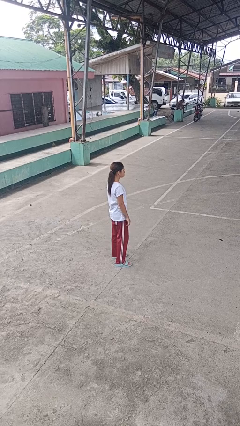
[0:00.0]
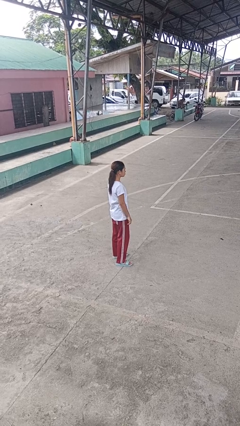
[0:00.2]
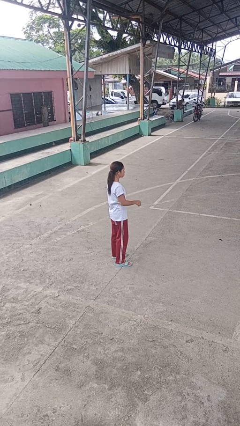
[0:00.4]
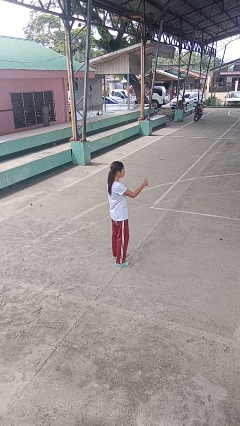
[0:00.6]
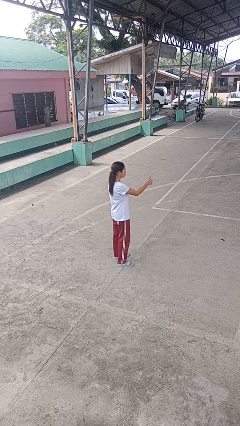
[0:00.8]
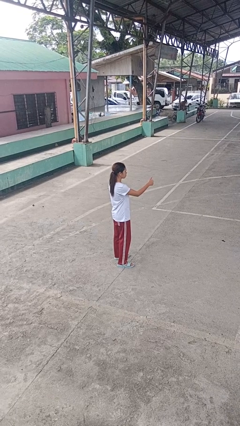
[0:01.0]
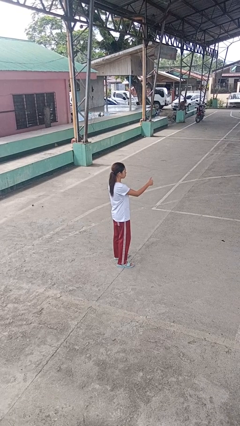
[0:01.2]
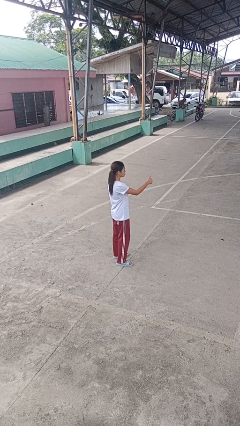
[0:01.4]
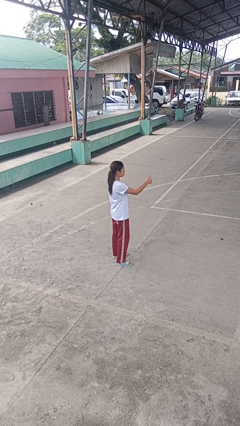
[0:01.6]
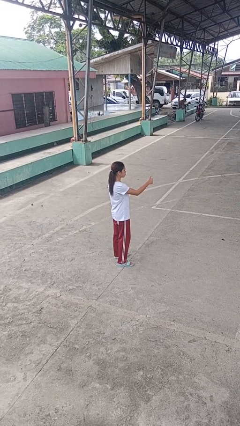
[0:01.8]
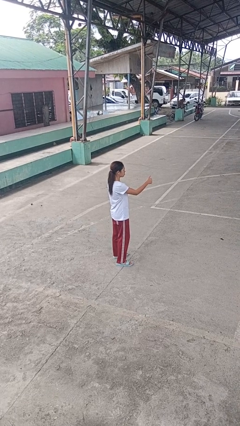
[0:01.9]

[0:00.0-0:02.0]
person gestures thumbs up

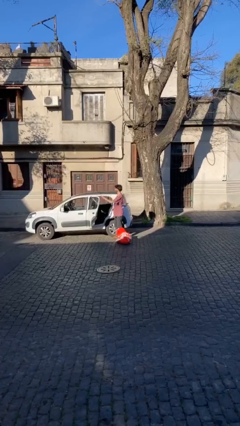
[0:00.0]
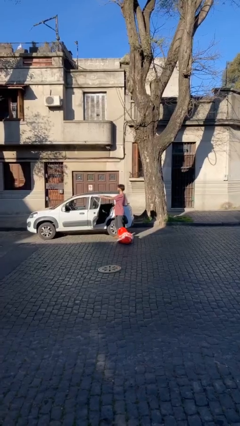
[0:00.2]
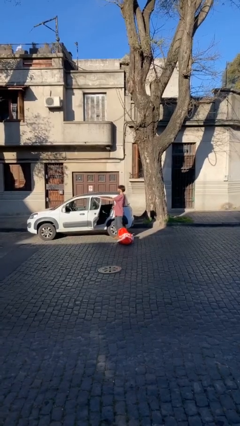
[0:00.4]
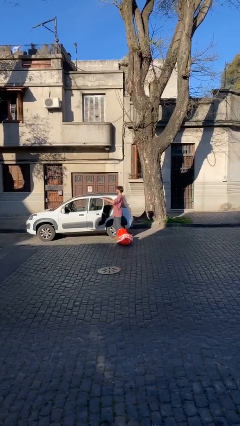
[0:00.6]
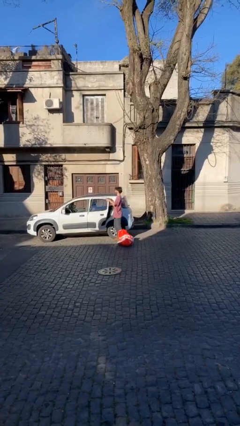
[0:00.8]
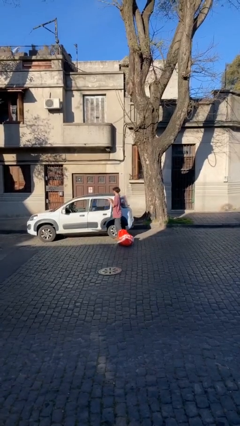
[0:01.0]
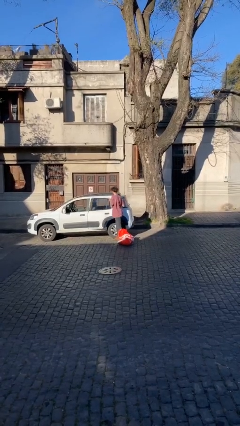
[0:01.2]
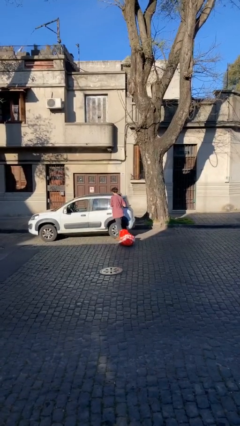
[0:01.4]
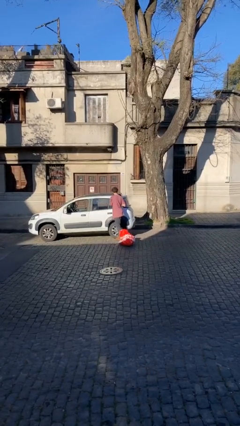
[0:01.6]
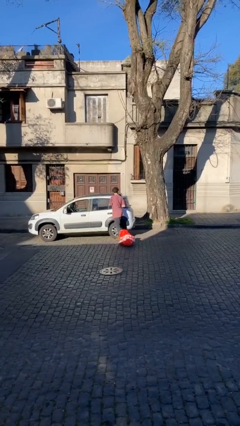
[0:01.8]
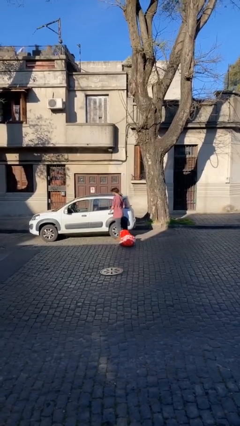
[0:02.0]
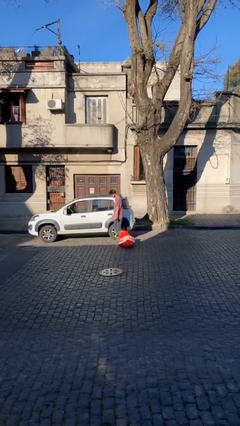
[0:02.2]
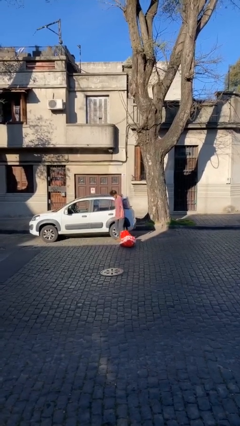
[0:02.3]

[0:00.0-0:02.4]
person closes car door

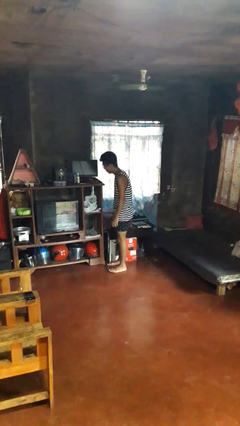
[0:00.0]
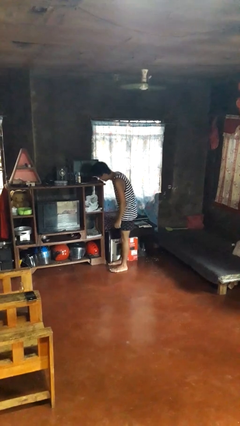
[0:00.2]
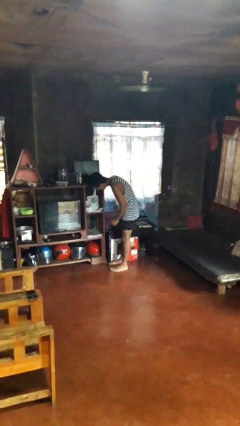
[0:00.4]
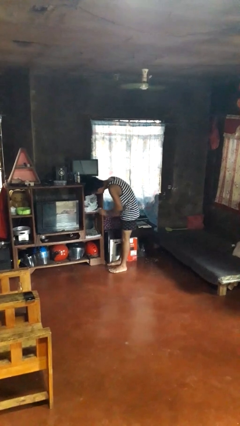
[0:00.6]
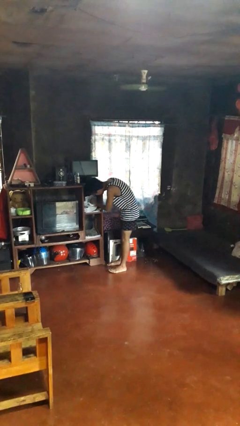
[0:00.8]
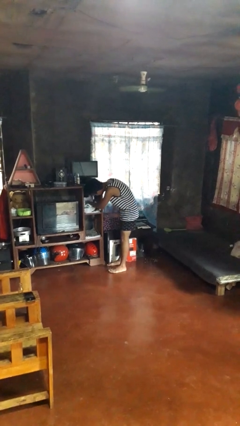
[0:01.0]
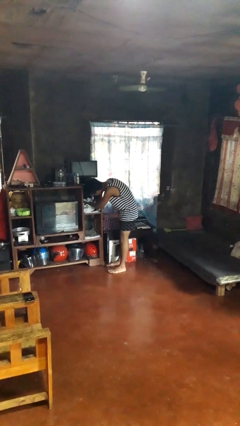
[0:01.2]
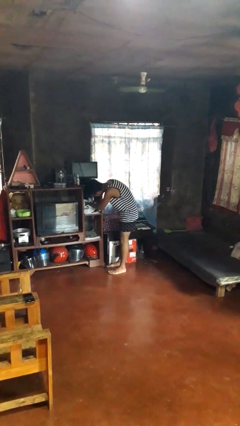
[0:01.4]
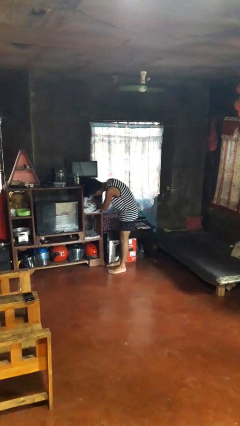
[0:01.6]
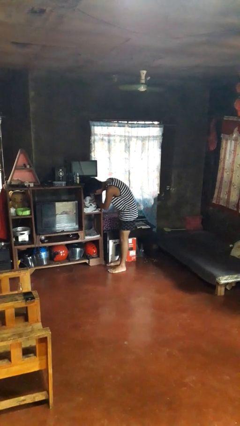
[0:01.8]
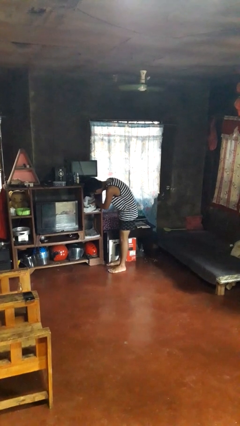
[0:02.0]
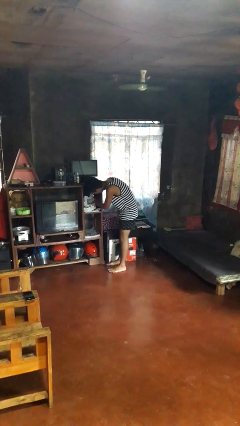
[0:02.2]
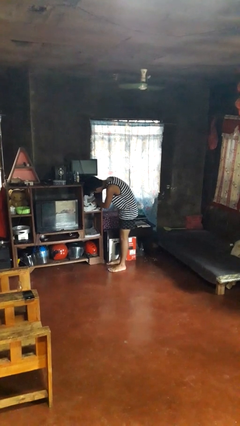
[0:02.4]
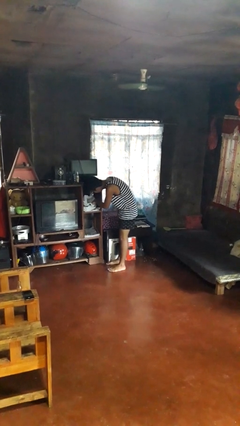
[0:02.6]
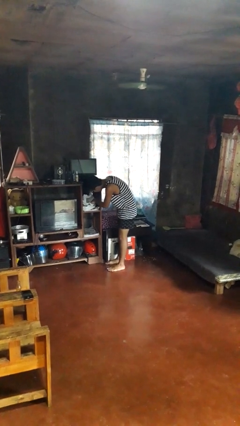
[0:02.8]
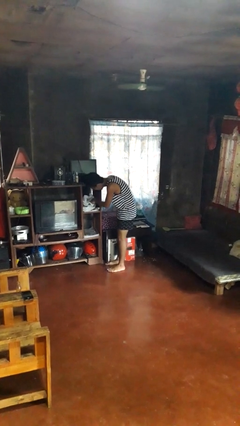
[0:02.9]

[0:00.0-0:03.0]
person searches in cabinet

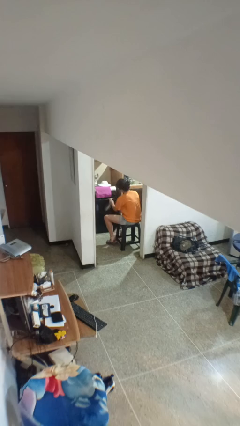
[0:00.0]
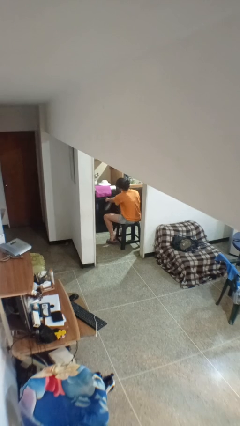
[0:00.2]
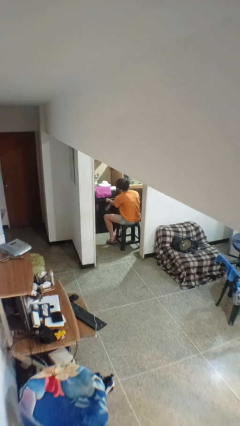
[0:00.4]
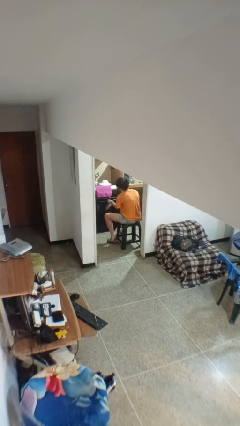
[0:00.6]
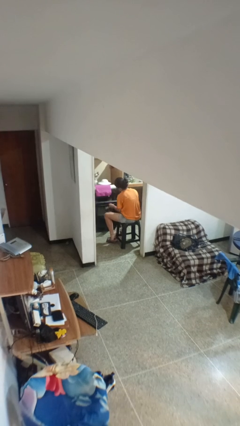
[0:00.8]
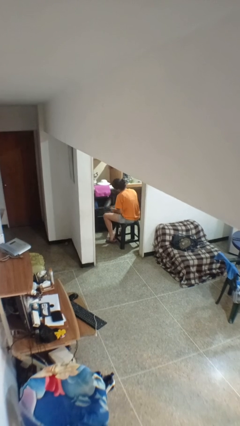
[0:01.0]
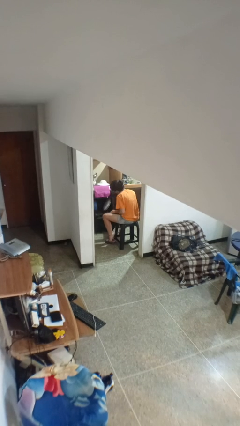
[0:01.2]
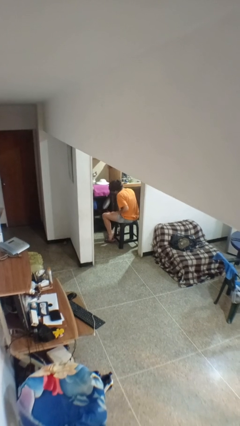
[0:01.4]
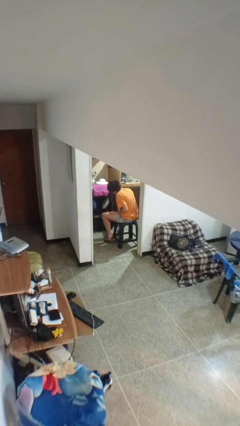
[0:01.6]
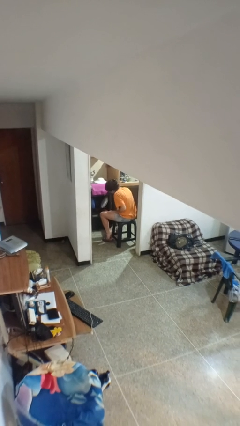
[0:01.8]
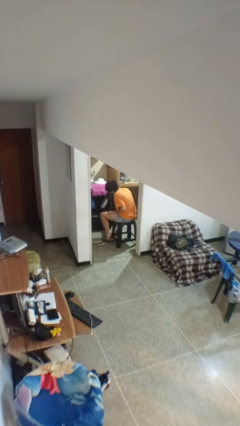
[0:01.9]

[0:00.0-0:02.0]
person opens dishwasher

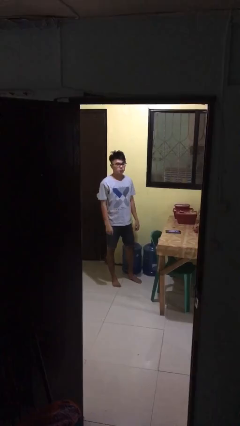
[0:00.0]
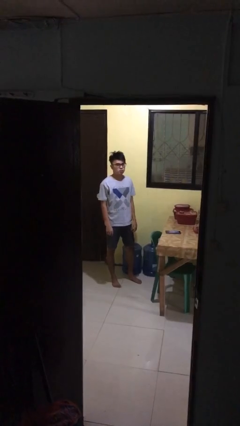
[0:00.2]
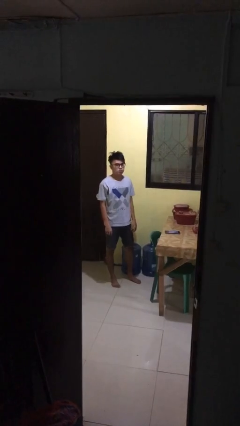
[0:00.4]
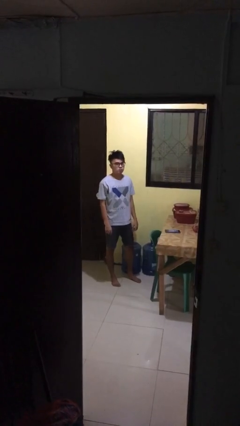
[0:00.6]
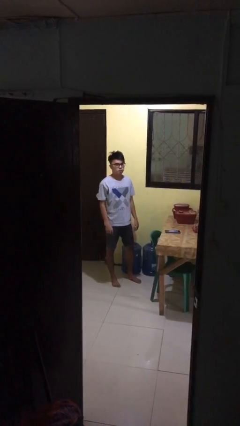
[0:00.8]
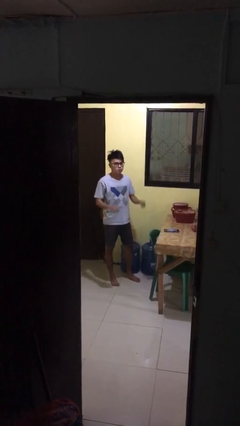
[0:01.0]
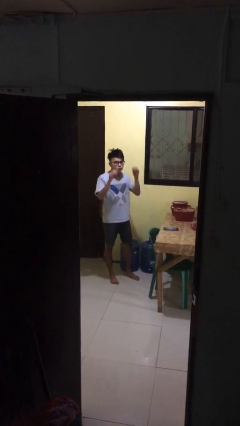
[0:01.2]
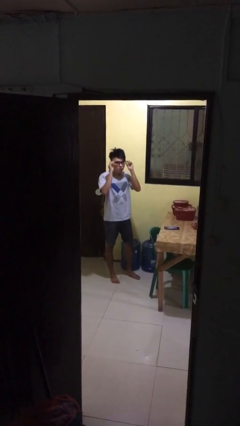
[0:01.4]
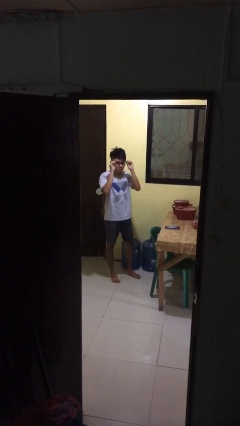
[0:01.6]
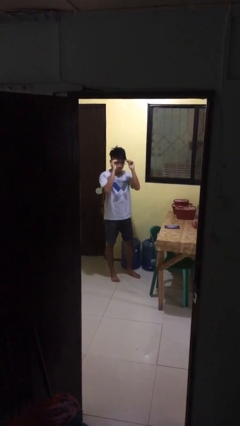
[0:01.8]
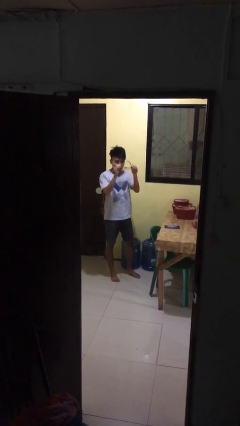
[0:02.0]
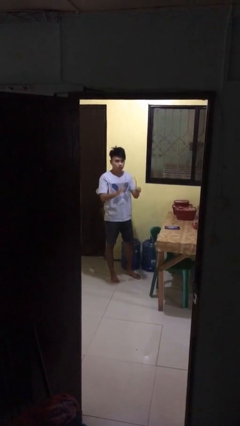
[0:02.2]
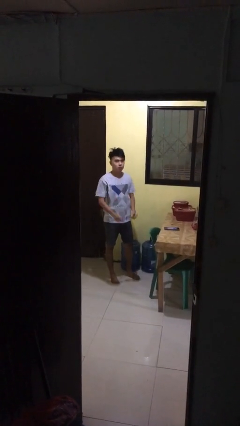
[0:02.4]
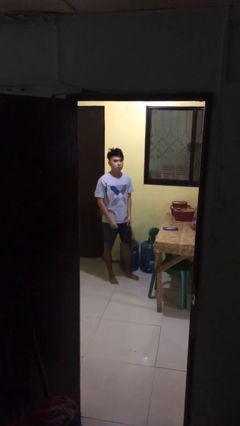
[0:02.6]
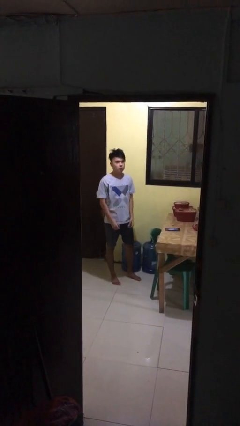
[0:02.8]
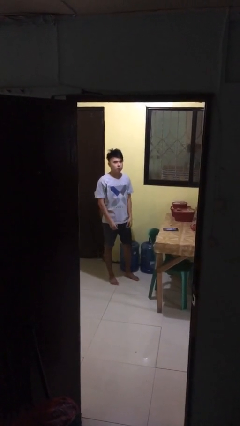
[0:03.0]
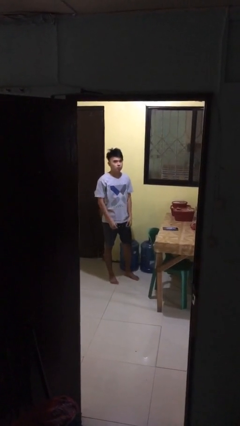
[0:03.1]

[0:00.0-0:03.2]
person takes off glasses

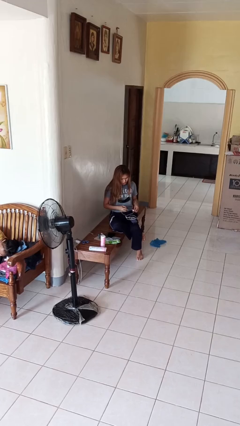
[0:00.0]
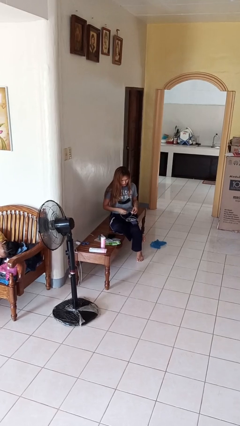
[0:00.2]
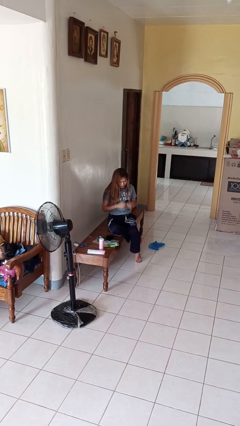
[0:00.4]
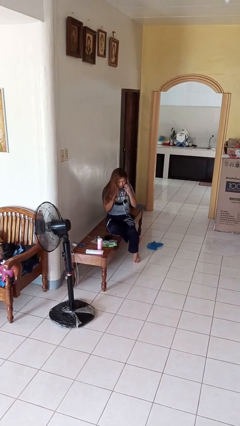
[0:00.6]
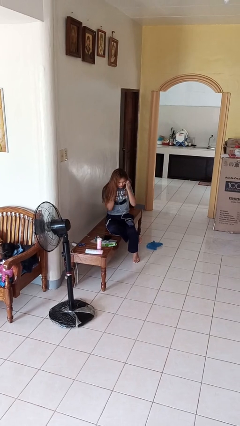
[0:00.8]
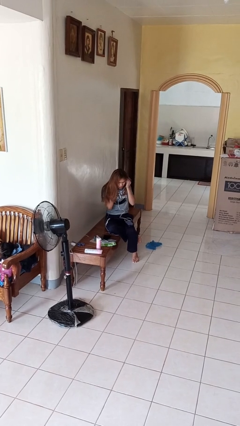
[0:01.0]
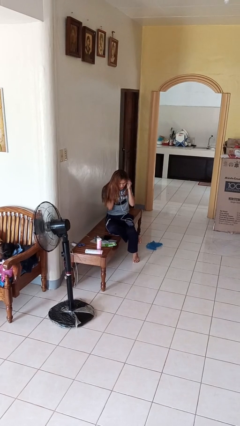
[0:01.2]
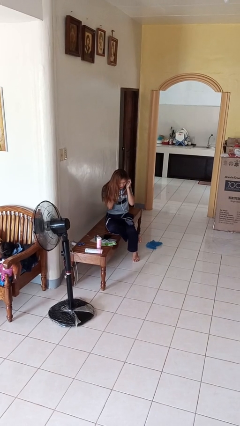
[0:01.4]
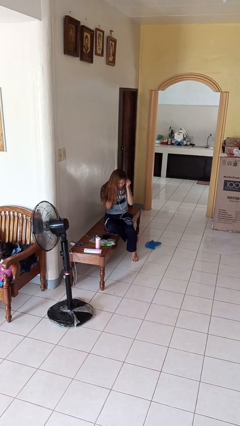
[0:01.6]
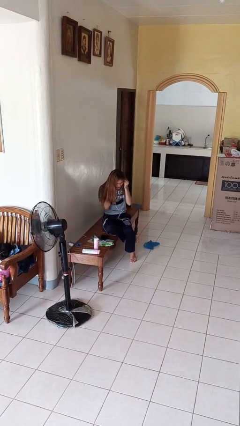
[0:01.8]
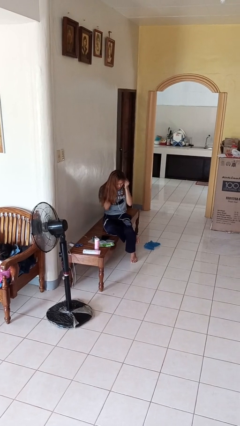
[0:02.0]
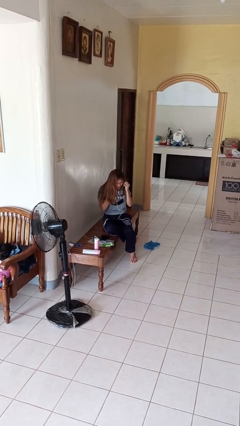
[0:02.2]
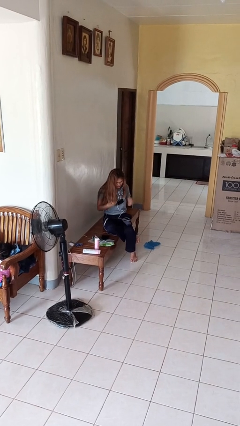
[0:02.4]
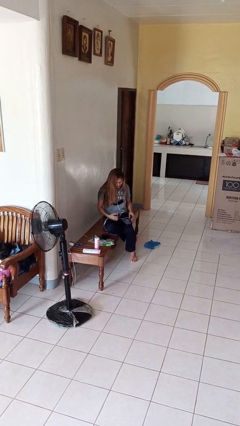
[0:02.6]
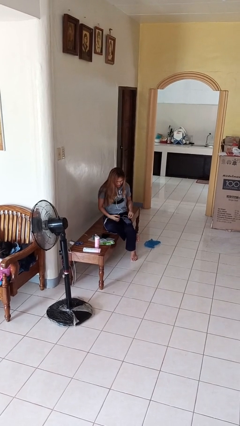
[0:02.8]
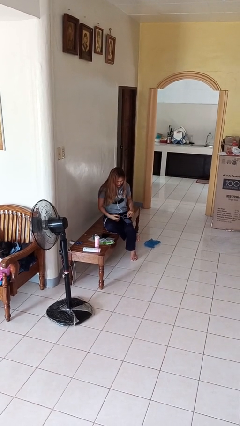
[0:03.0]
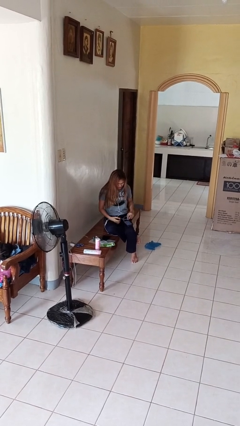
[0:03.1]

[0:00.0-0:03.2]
person puts on headphones

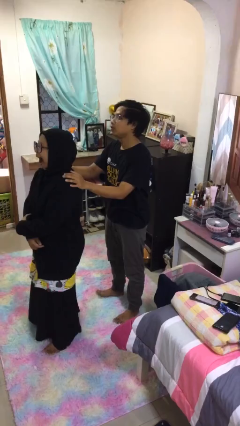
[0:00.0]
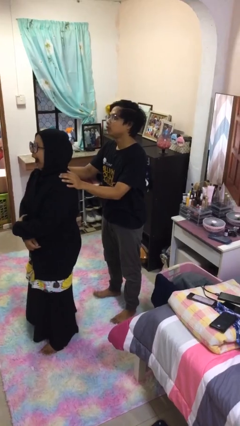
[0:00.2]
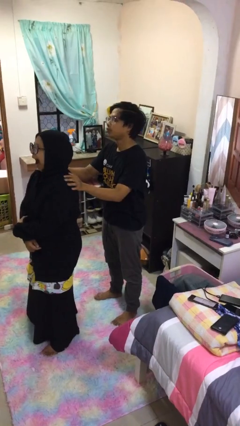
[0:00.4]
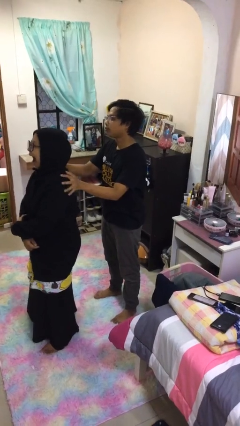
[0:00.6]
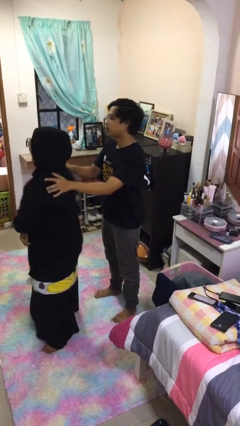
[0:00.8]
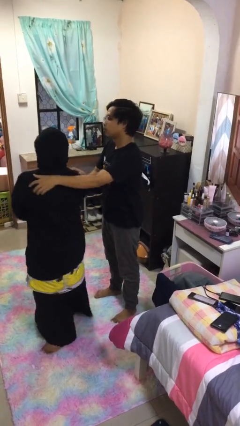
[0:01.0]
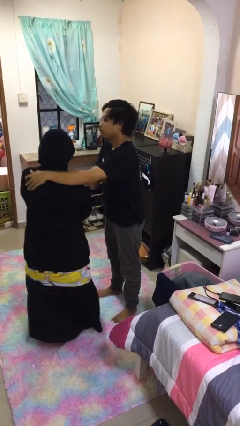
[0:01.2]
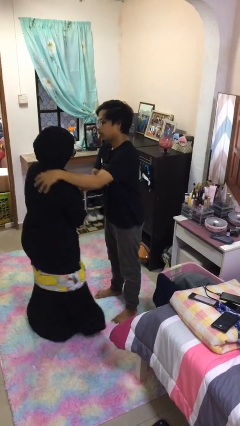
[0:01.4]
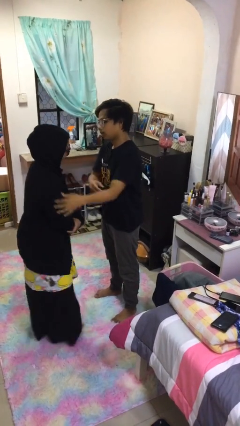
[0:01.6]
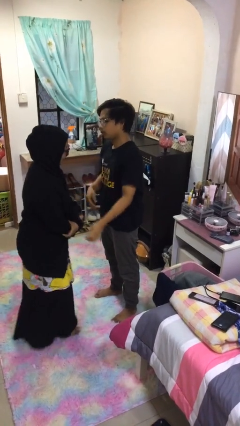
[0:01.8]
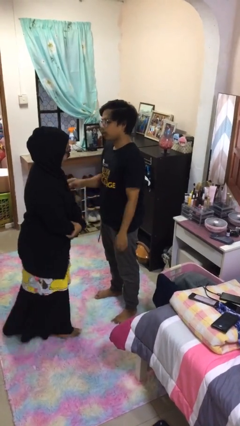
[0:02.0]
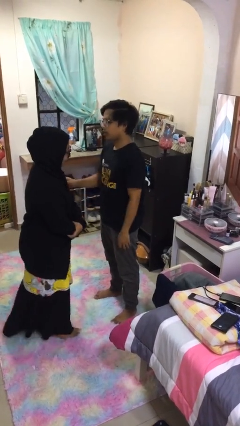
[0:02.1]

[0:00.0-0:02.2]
person spins person around
